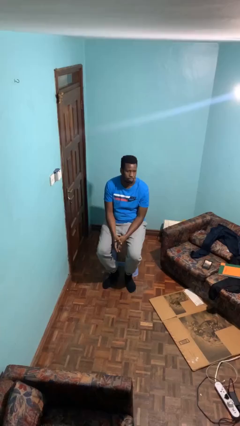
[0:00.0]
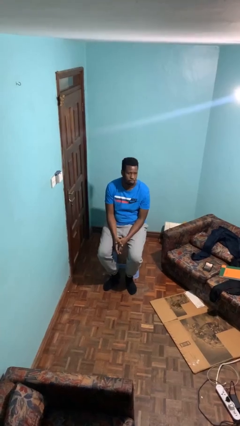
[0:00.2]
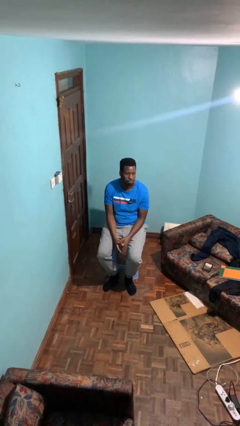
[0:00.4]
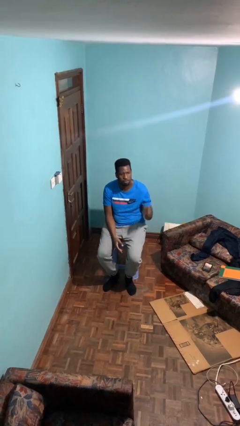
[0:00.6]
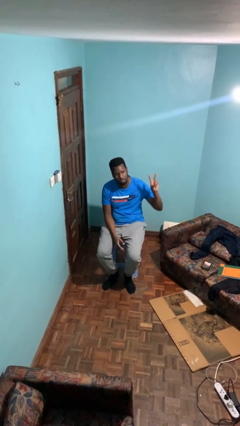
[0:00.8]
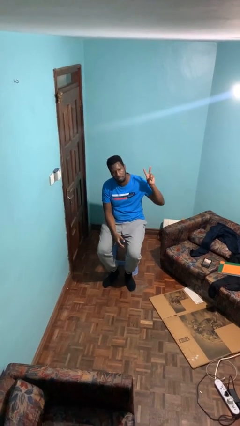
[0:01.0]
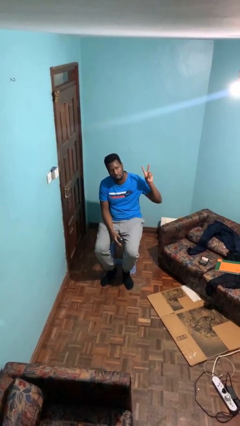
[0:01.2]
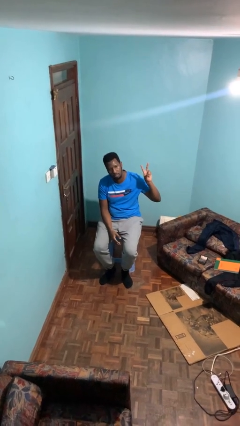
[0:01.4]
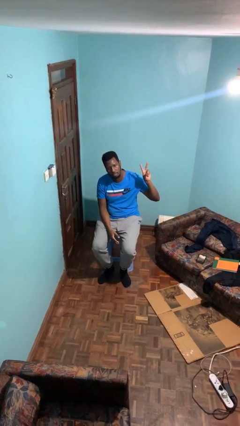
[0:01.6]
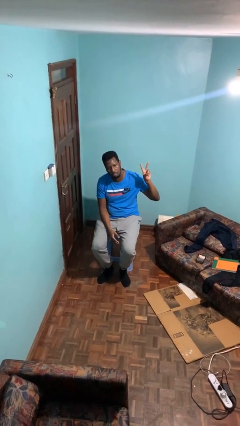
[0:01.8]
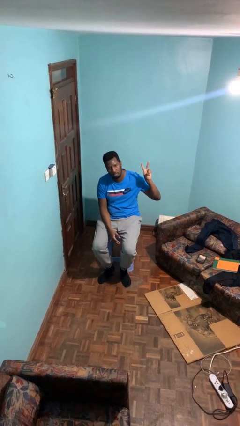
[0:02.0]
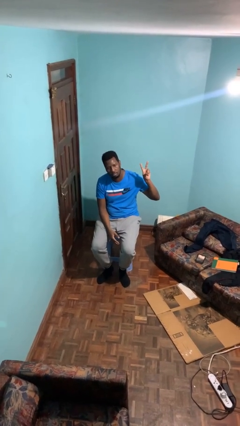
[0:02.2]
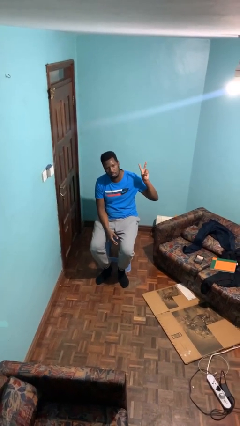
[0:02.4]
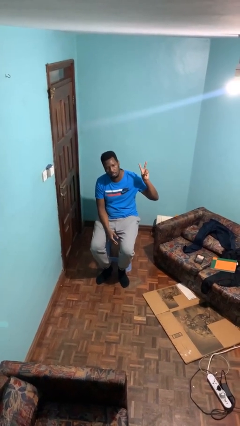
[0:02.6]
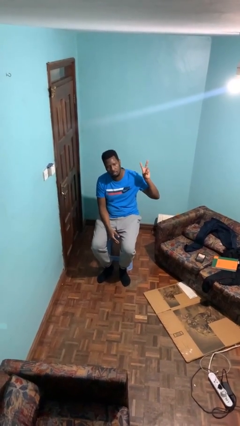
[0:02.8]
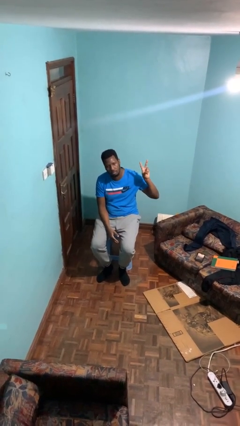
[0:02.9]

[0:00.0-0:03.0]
person gestures peace

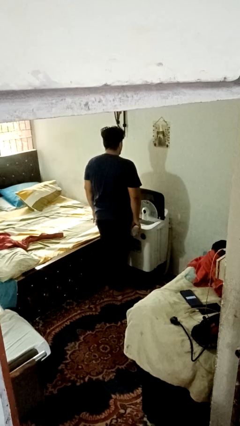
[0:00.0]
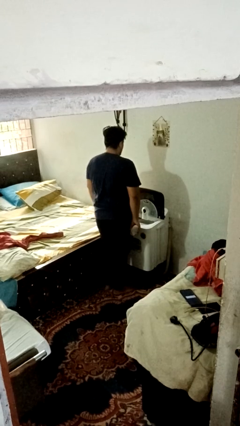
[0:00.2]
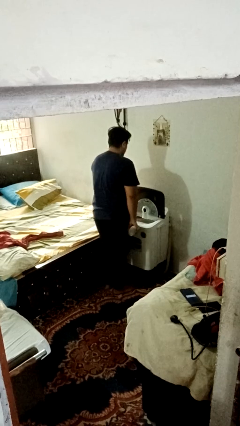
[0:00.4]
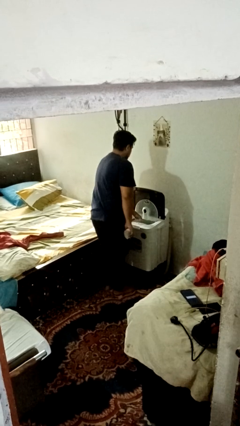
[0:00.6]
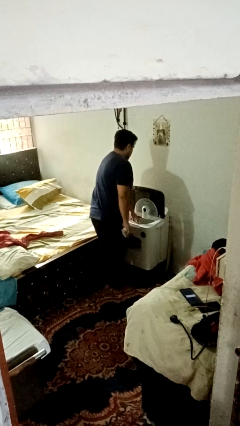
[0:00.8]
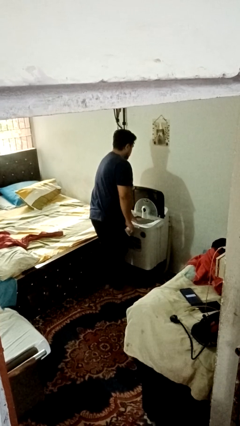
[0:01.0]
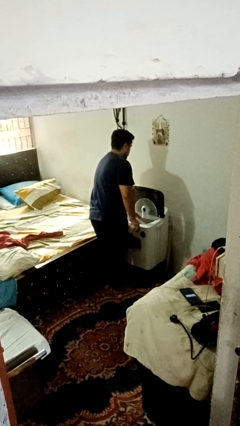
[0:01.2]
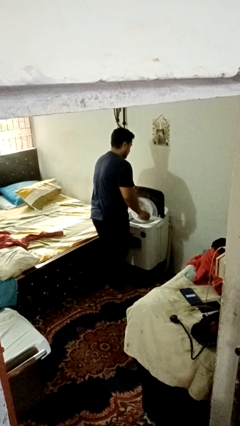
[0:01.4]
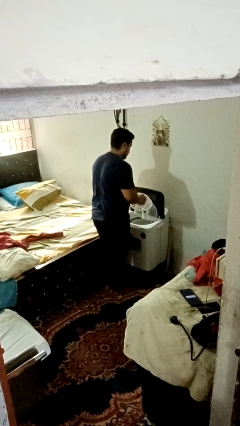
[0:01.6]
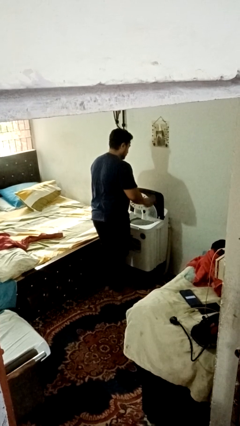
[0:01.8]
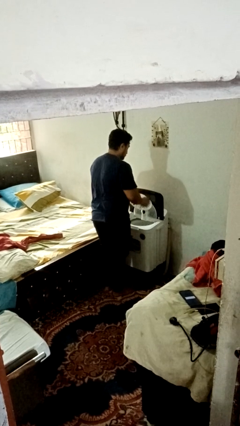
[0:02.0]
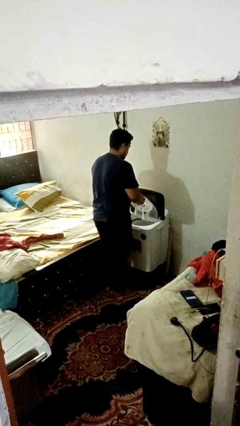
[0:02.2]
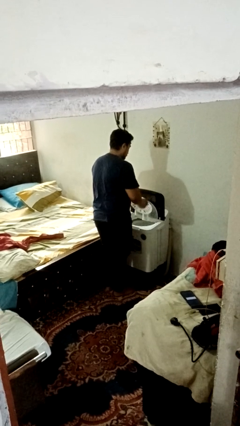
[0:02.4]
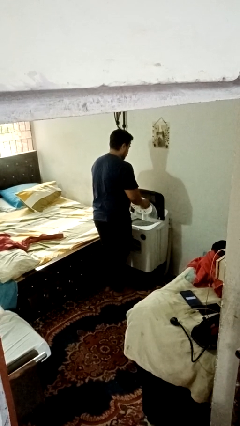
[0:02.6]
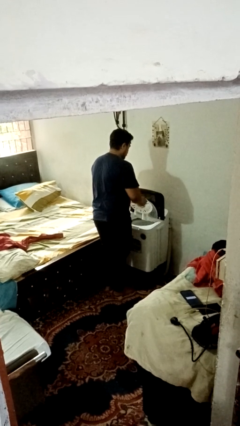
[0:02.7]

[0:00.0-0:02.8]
person cleans dryer lint trap

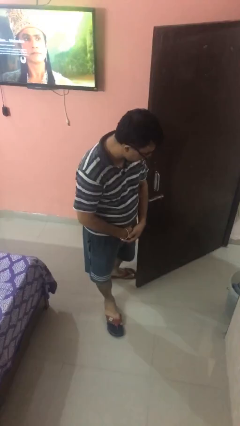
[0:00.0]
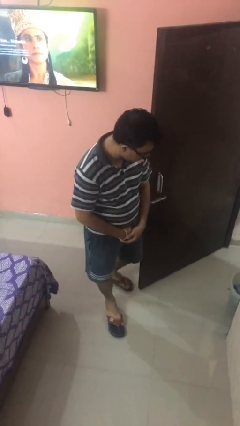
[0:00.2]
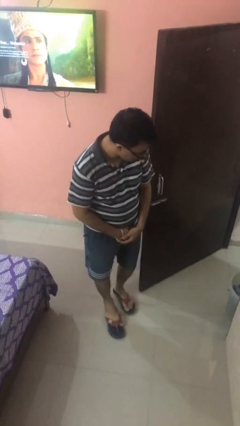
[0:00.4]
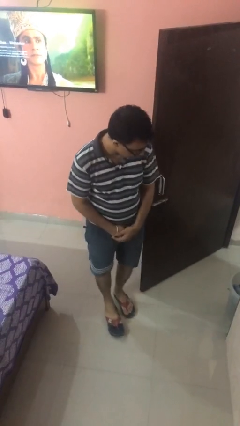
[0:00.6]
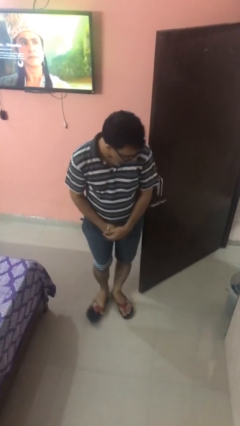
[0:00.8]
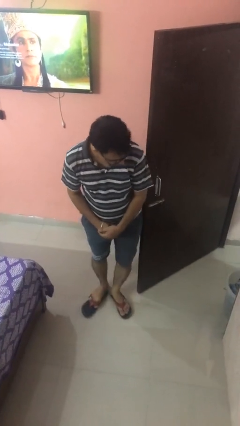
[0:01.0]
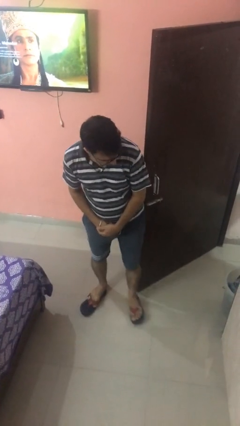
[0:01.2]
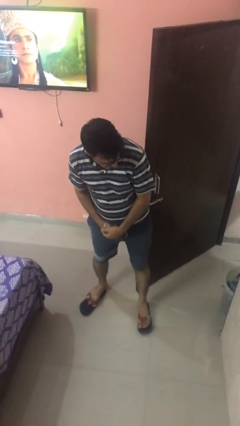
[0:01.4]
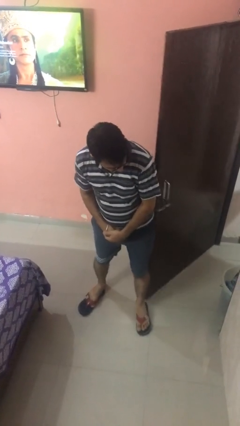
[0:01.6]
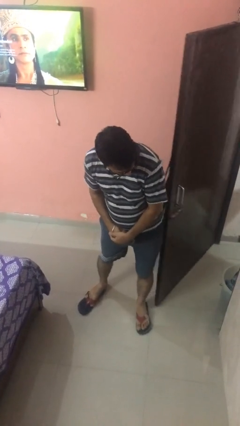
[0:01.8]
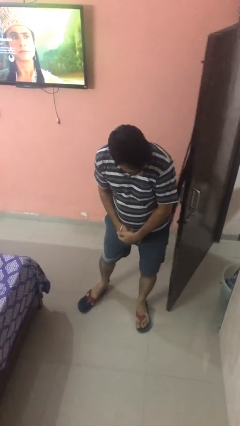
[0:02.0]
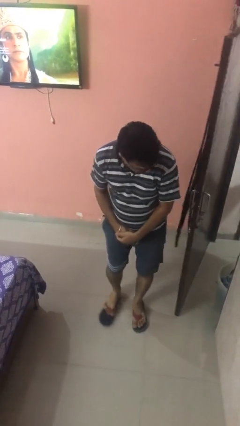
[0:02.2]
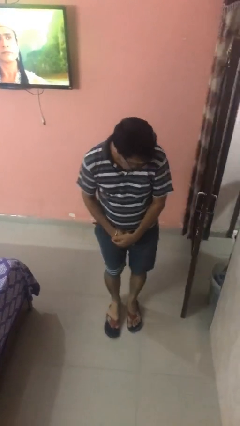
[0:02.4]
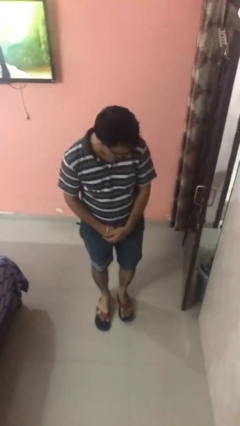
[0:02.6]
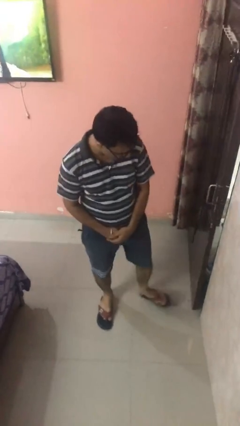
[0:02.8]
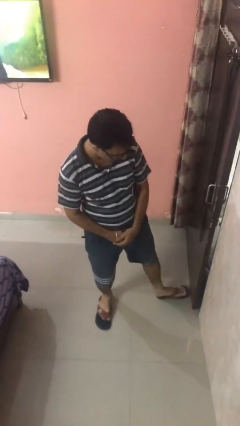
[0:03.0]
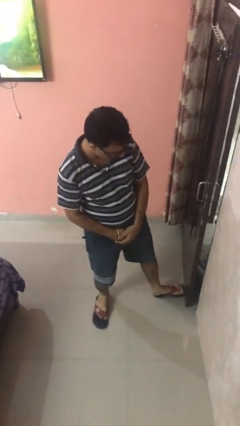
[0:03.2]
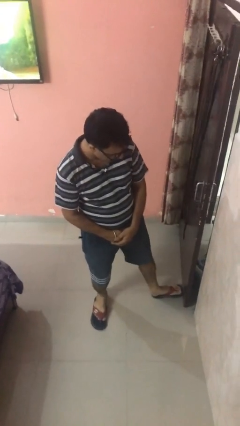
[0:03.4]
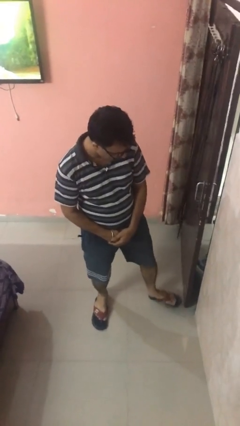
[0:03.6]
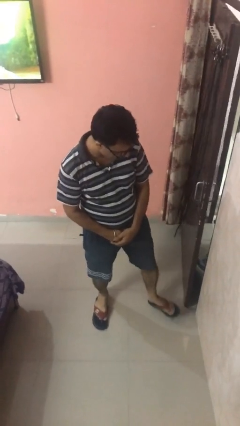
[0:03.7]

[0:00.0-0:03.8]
person closes door with hip

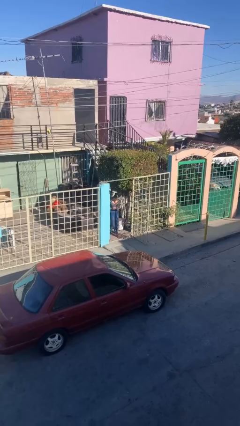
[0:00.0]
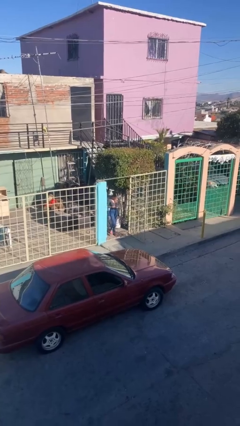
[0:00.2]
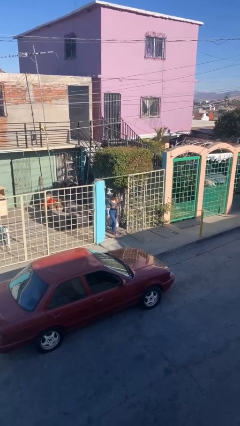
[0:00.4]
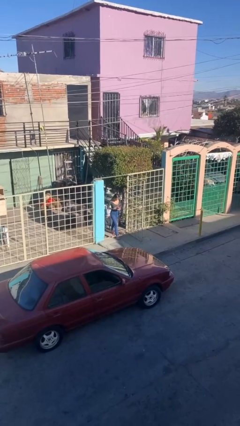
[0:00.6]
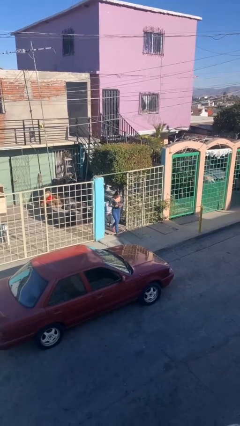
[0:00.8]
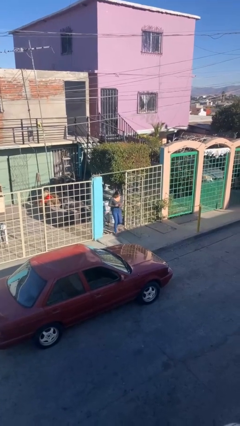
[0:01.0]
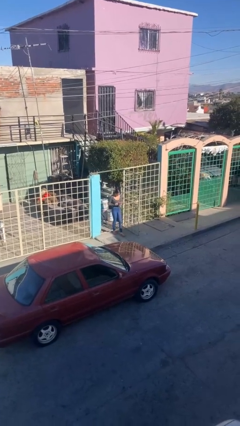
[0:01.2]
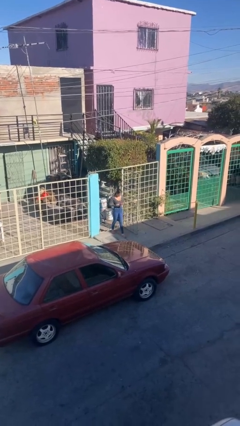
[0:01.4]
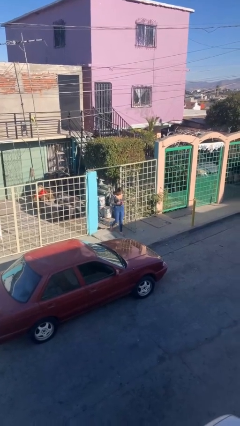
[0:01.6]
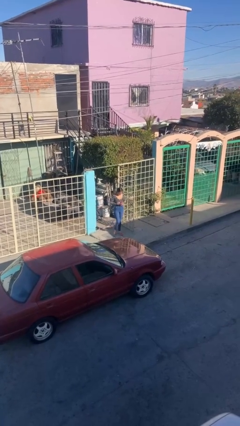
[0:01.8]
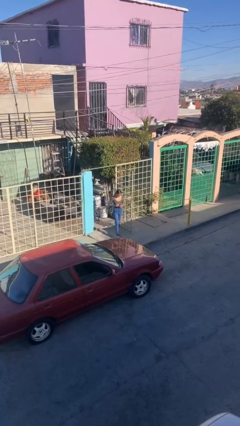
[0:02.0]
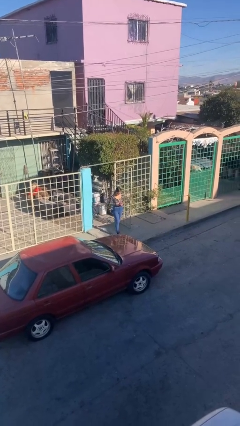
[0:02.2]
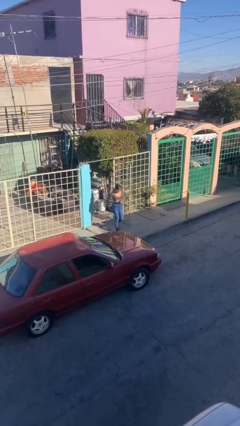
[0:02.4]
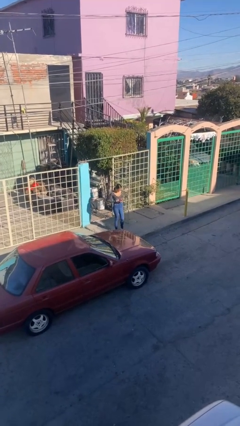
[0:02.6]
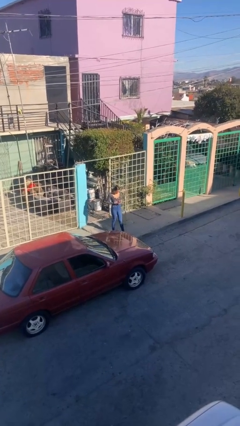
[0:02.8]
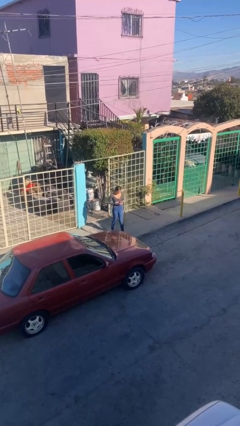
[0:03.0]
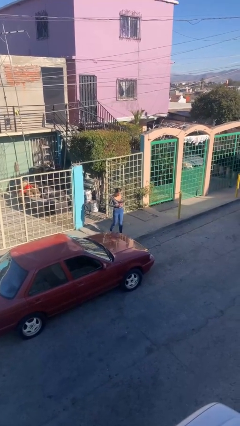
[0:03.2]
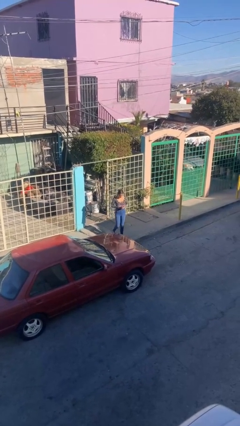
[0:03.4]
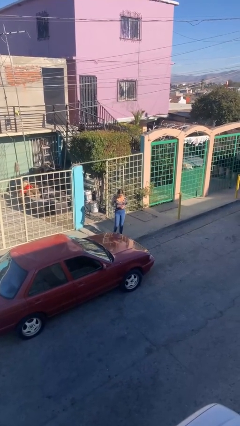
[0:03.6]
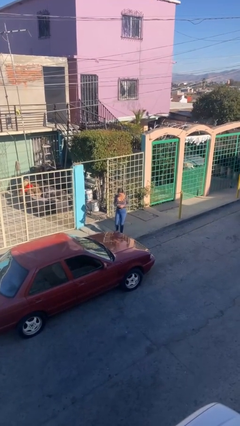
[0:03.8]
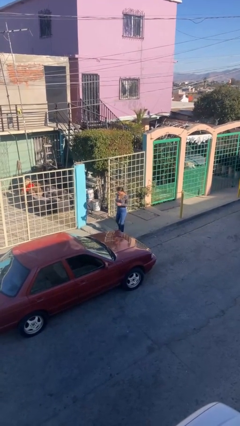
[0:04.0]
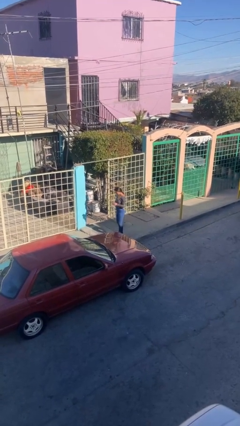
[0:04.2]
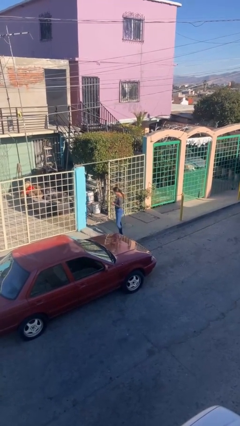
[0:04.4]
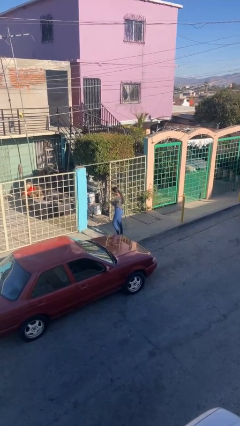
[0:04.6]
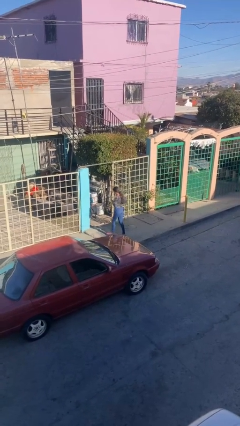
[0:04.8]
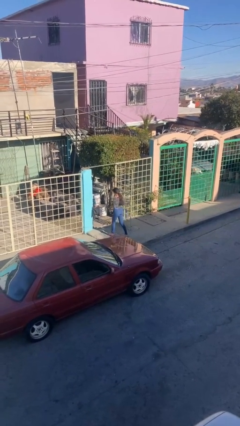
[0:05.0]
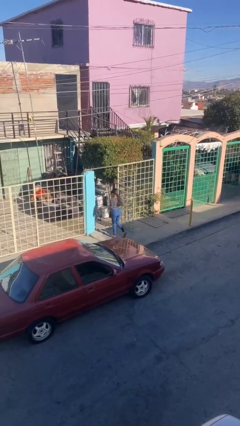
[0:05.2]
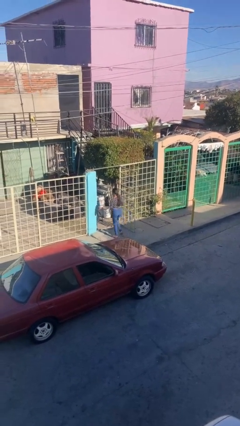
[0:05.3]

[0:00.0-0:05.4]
person exits scene through structure

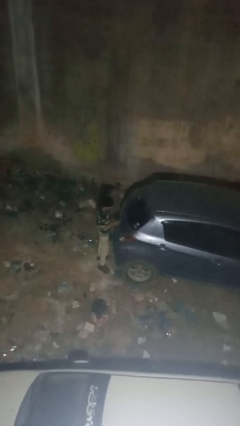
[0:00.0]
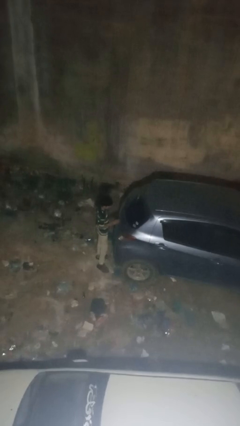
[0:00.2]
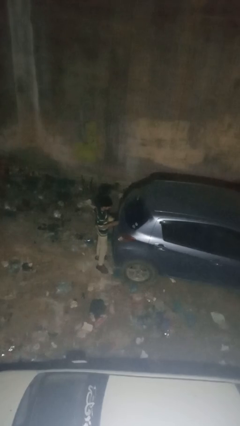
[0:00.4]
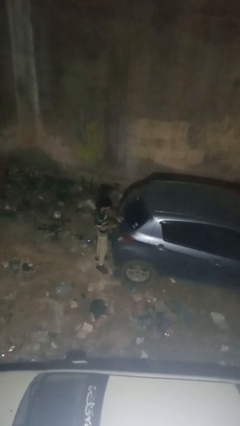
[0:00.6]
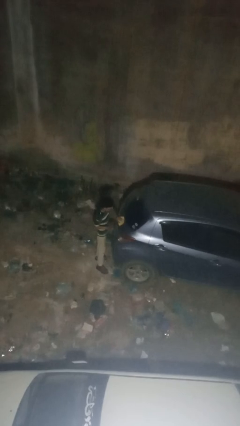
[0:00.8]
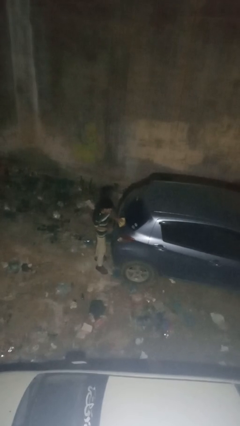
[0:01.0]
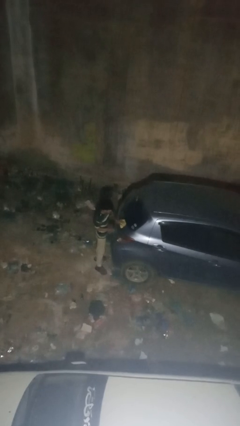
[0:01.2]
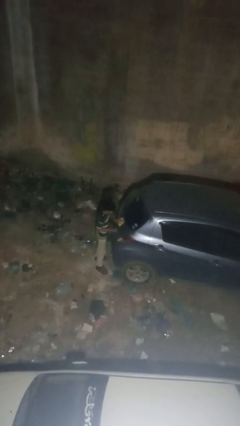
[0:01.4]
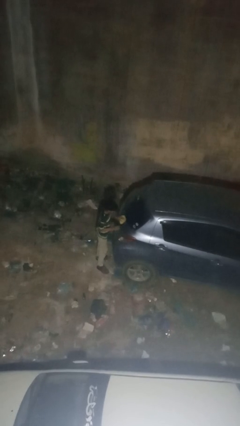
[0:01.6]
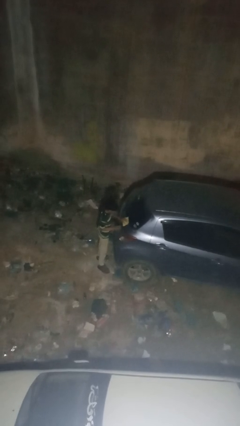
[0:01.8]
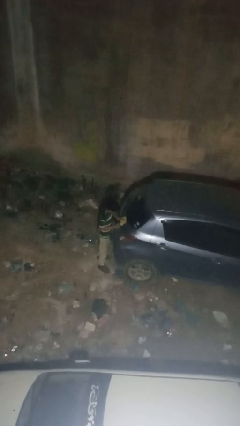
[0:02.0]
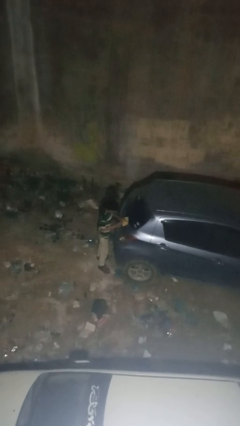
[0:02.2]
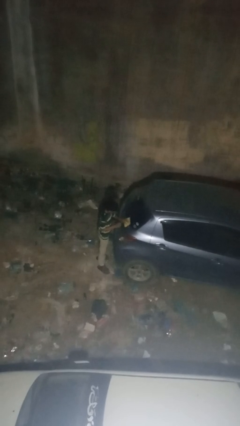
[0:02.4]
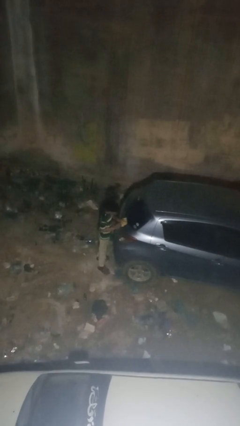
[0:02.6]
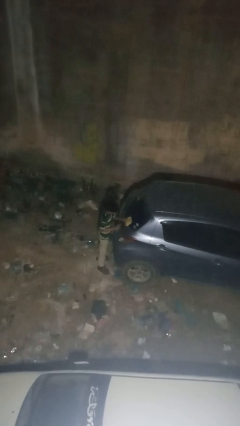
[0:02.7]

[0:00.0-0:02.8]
person polishes car with rag
